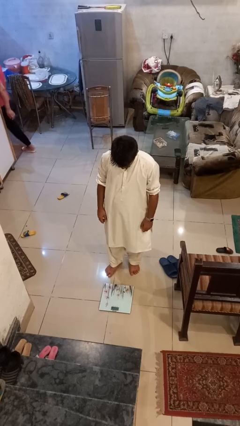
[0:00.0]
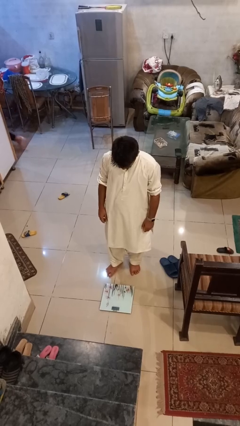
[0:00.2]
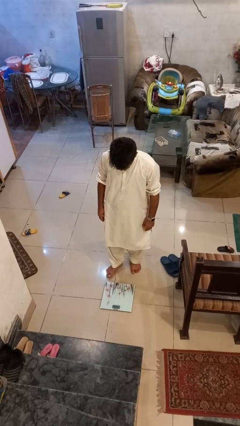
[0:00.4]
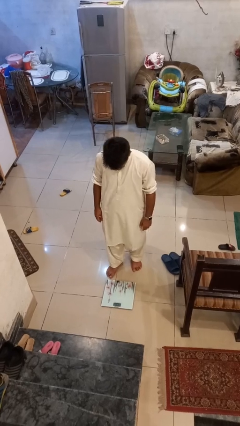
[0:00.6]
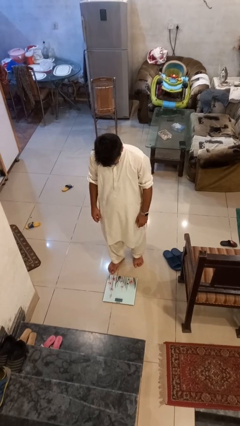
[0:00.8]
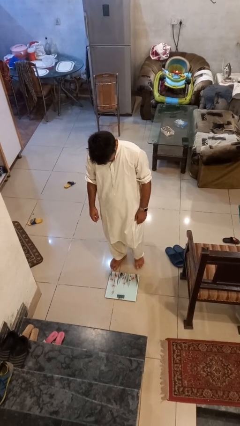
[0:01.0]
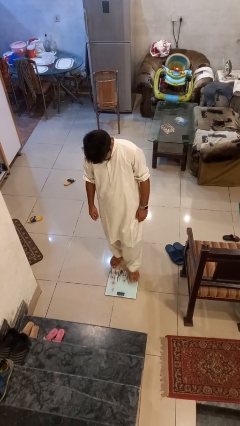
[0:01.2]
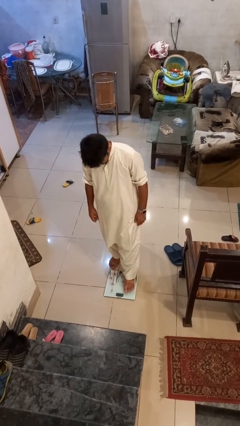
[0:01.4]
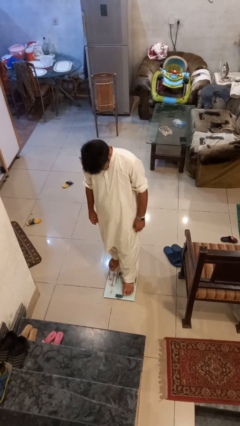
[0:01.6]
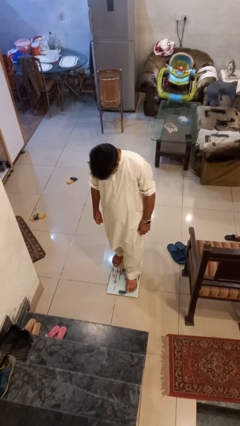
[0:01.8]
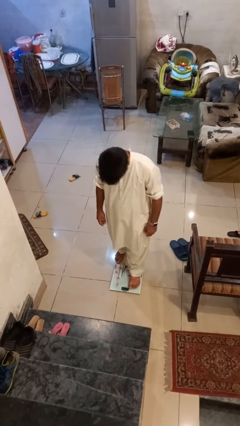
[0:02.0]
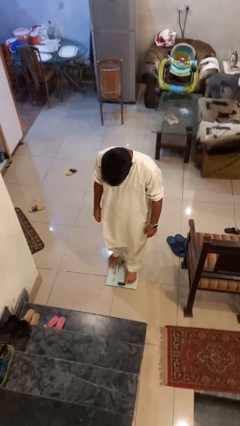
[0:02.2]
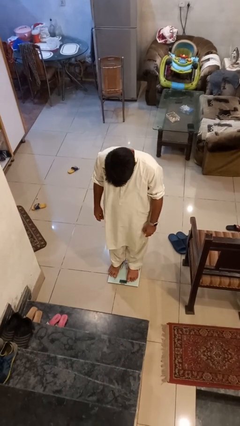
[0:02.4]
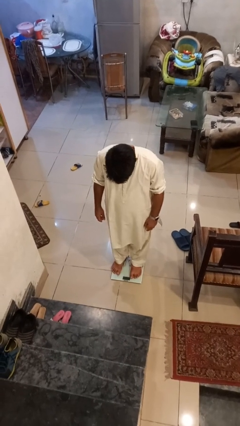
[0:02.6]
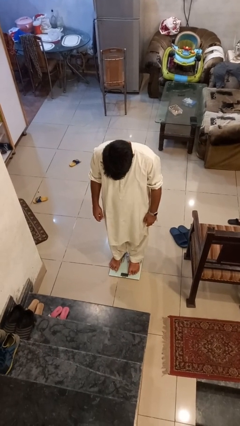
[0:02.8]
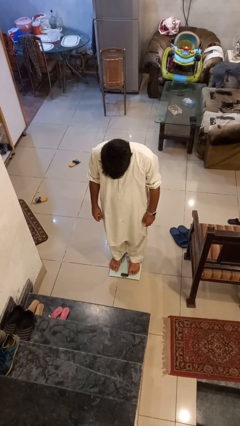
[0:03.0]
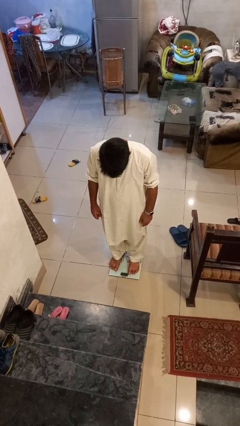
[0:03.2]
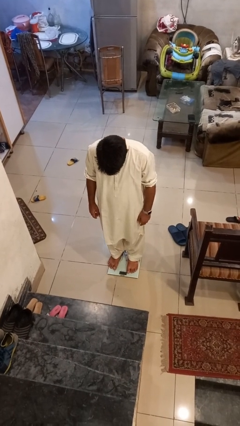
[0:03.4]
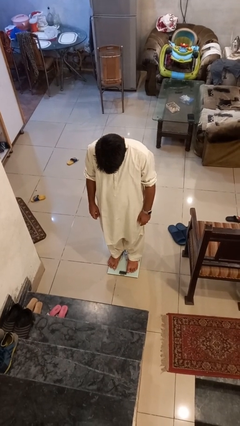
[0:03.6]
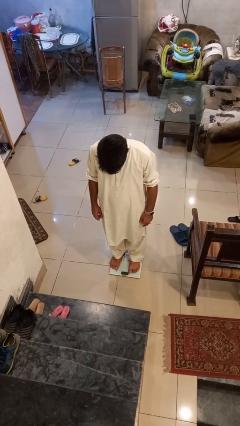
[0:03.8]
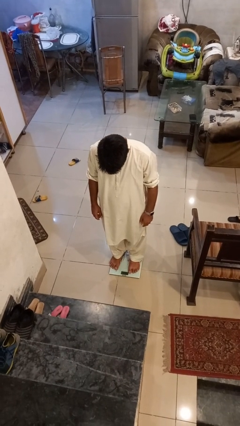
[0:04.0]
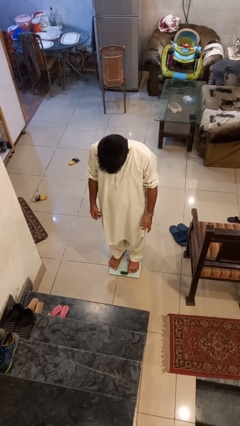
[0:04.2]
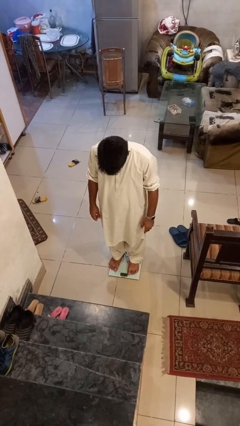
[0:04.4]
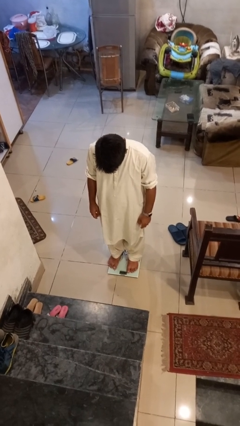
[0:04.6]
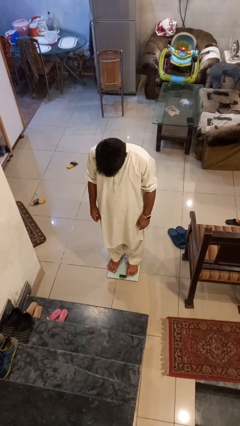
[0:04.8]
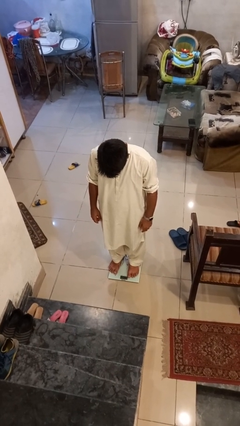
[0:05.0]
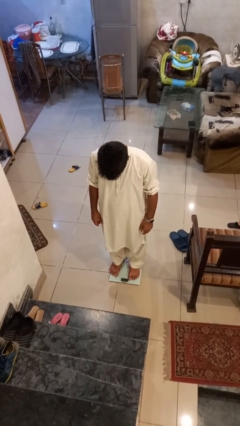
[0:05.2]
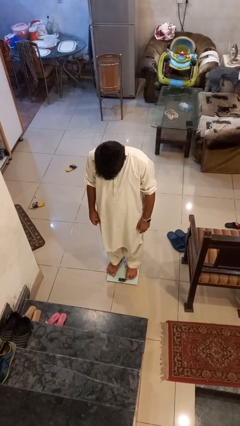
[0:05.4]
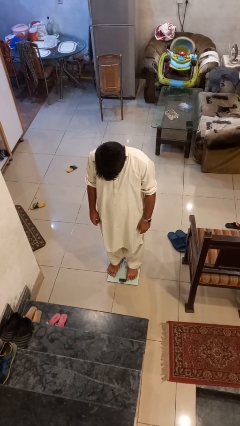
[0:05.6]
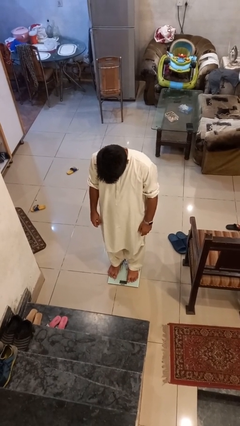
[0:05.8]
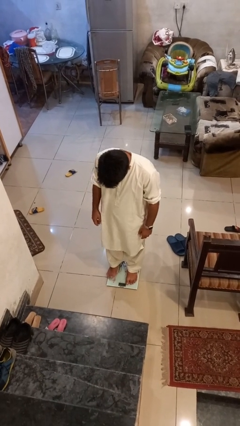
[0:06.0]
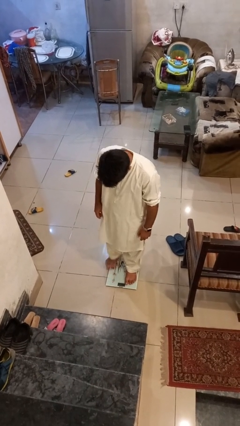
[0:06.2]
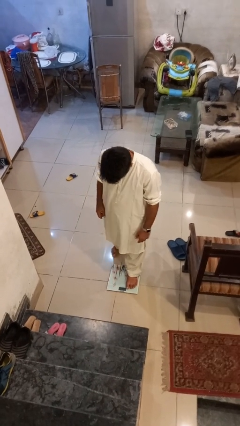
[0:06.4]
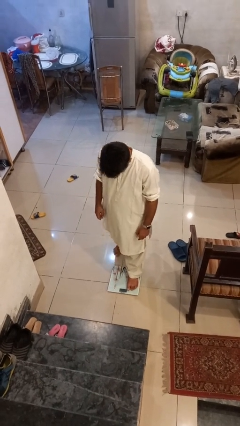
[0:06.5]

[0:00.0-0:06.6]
person uses bodyweight scale

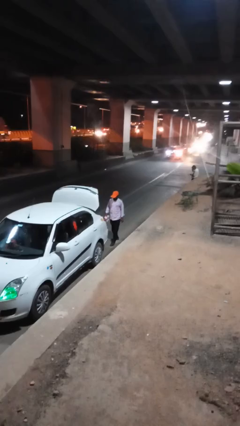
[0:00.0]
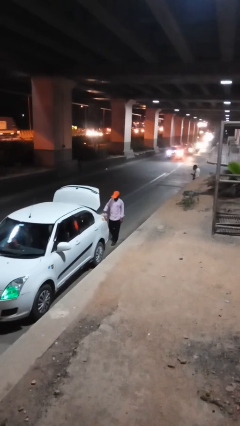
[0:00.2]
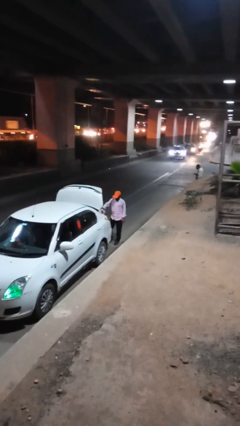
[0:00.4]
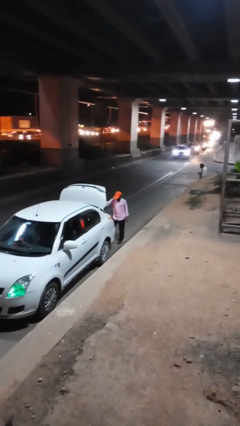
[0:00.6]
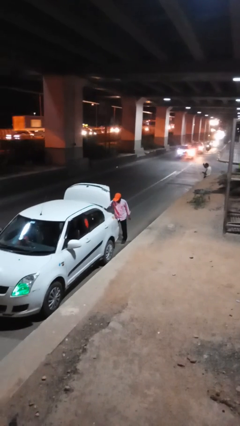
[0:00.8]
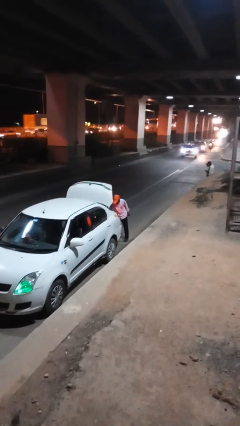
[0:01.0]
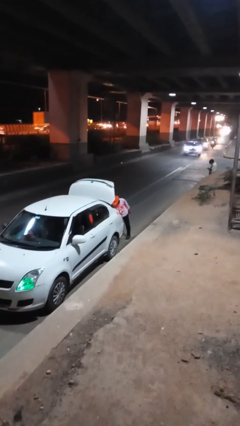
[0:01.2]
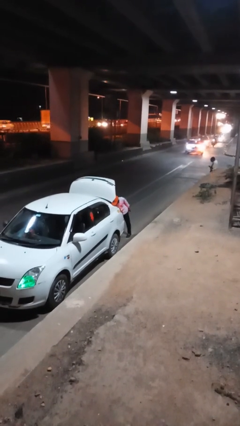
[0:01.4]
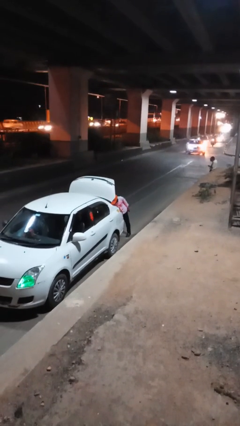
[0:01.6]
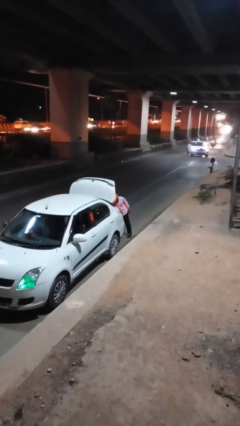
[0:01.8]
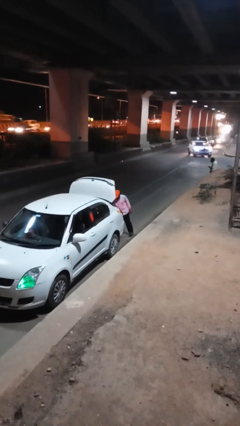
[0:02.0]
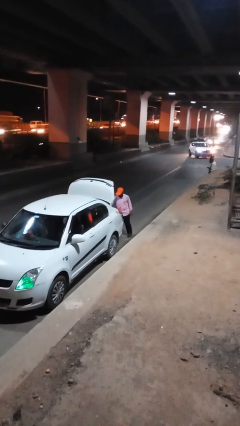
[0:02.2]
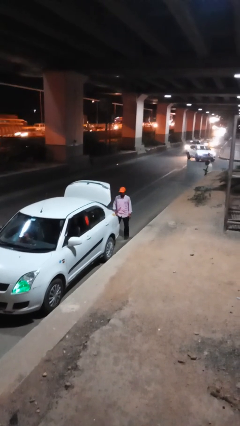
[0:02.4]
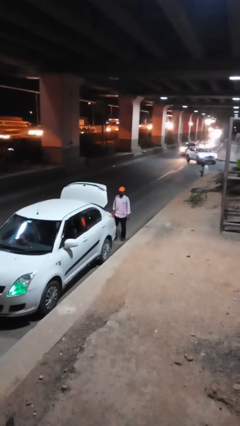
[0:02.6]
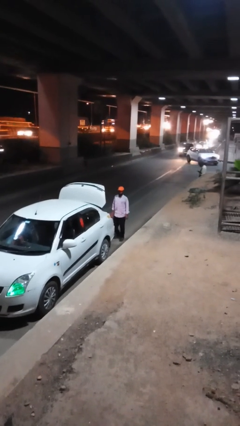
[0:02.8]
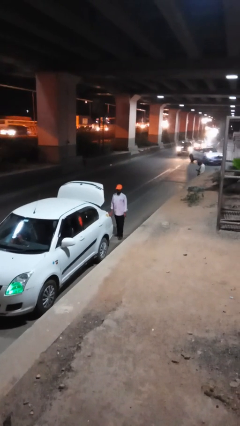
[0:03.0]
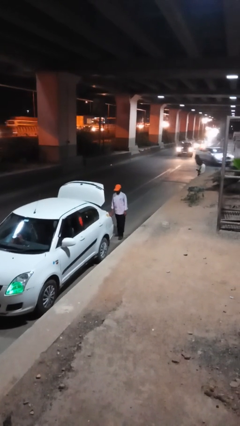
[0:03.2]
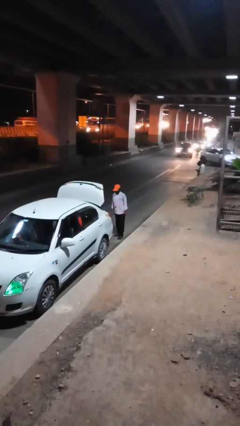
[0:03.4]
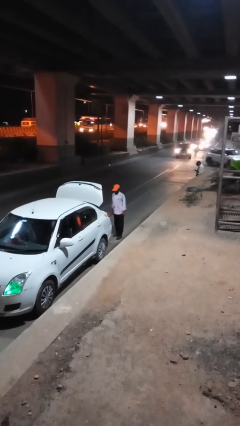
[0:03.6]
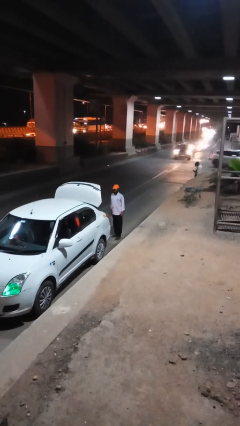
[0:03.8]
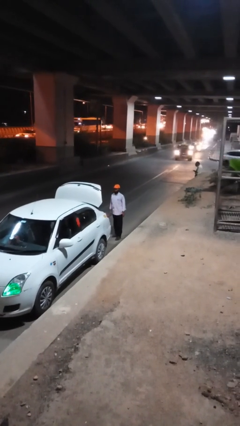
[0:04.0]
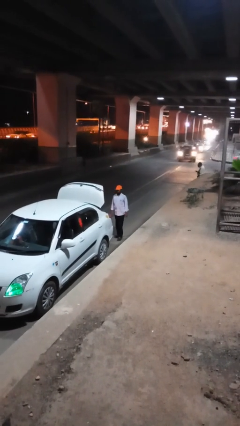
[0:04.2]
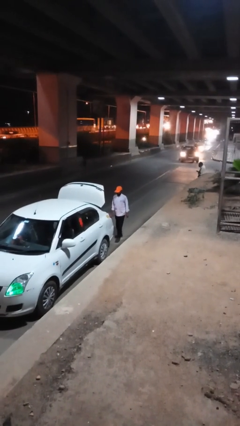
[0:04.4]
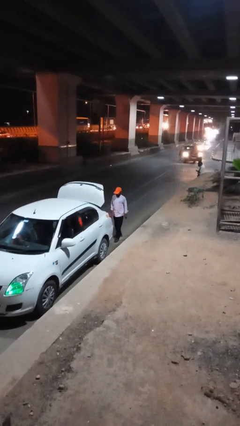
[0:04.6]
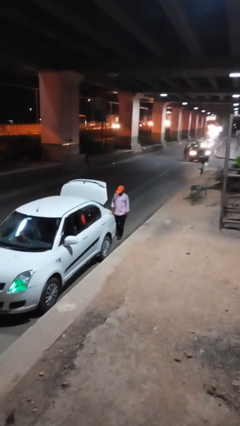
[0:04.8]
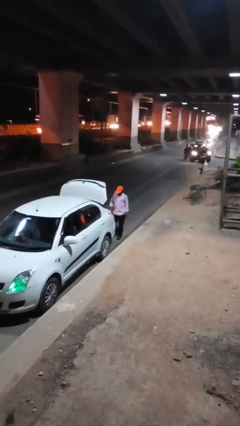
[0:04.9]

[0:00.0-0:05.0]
person loads car

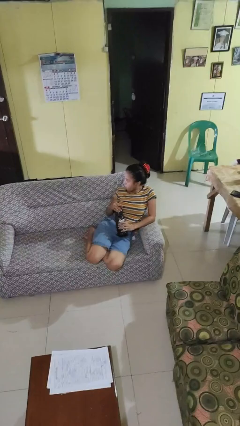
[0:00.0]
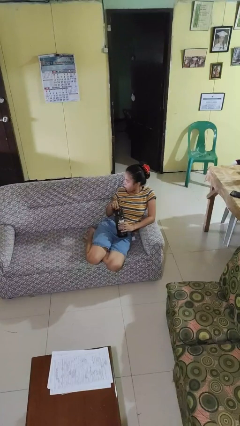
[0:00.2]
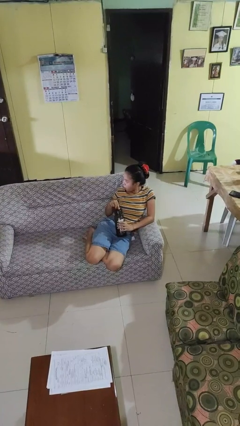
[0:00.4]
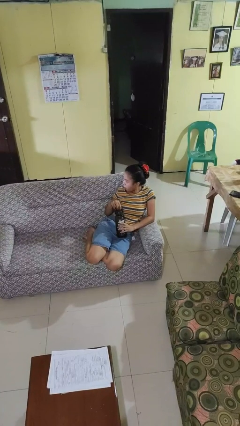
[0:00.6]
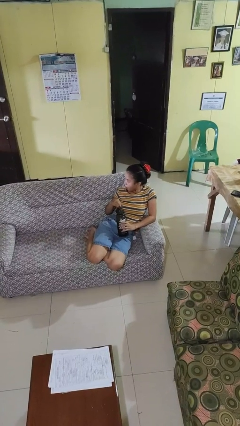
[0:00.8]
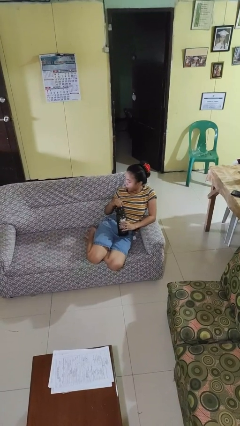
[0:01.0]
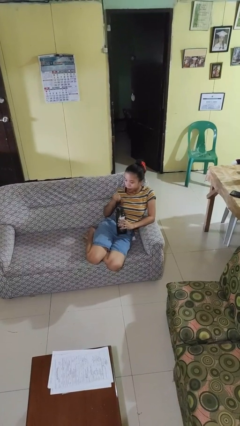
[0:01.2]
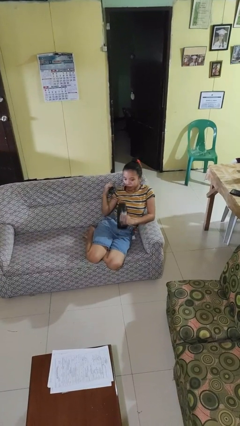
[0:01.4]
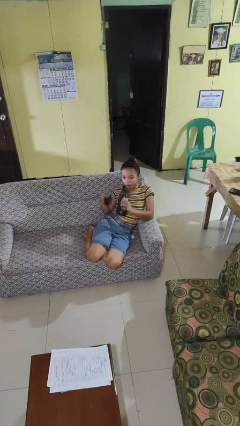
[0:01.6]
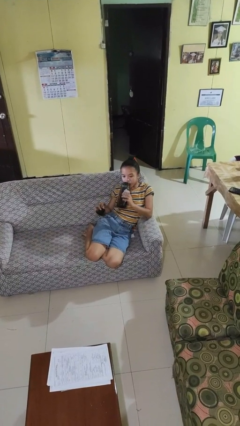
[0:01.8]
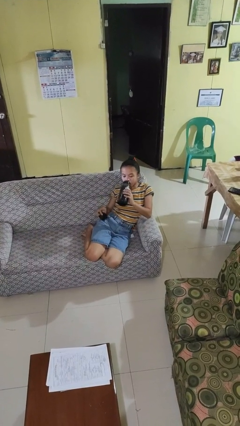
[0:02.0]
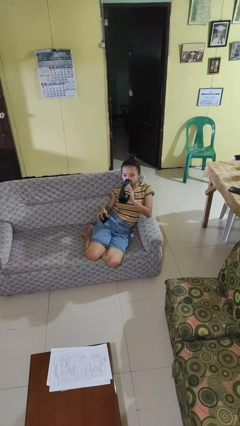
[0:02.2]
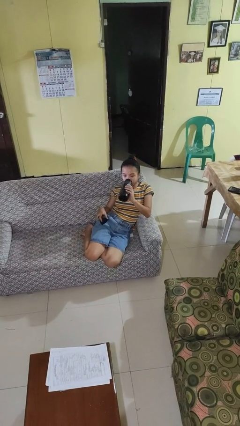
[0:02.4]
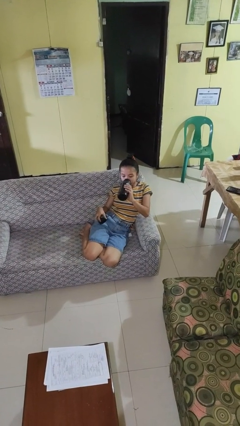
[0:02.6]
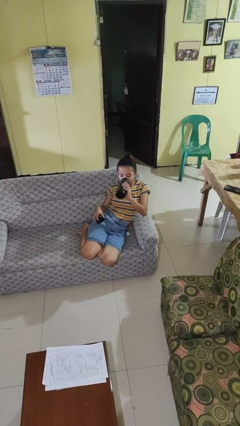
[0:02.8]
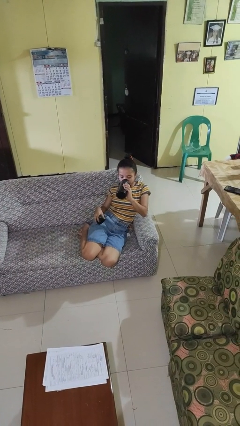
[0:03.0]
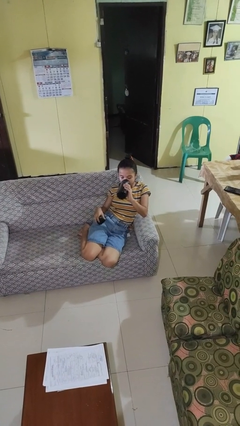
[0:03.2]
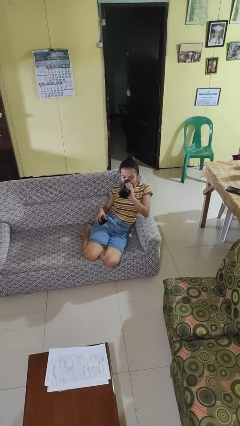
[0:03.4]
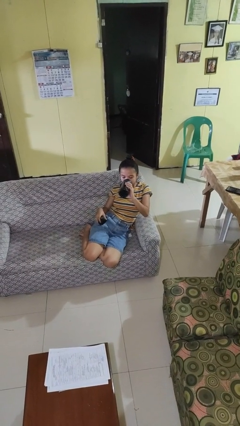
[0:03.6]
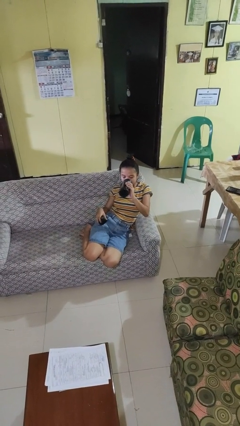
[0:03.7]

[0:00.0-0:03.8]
person drinks from bottle

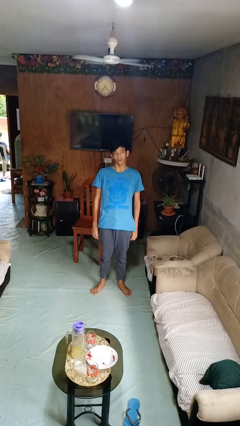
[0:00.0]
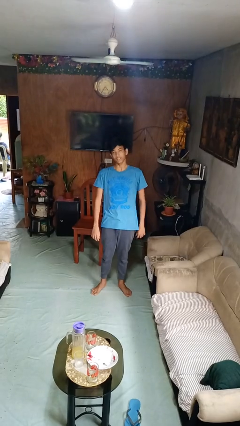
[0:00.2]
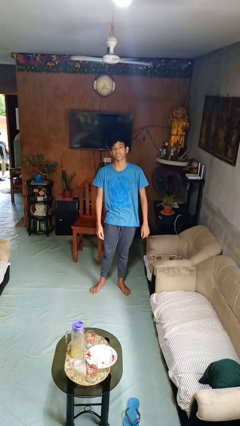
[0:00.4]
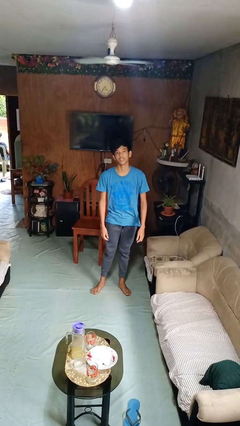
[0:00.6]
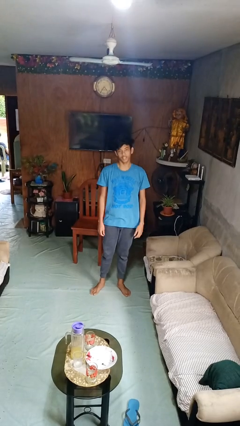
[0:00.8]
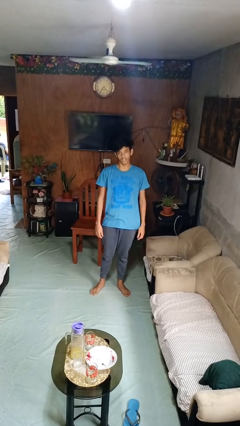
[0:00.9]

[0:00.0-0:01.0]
person dances in place

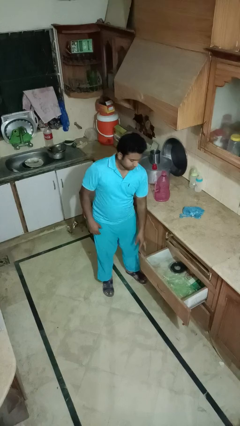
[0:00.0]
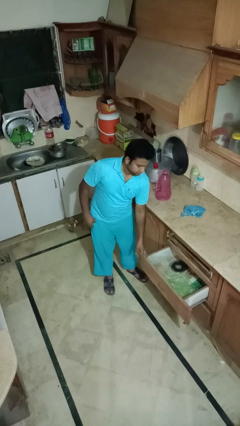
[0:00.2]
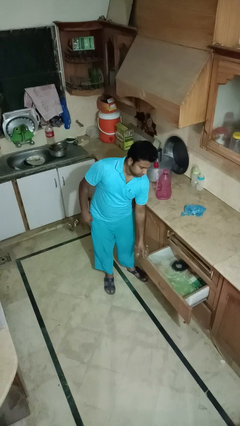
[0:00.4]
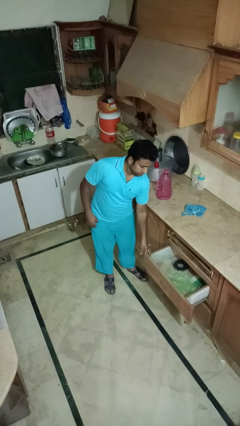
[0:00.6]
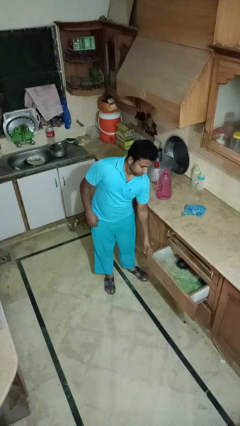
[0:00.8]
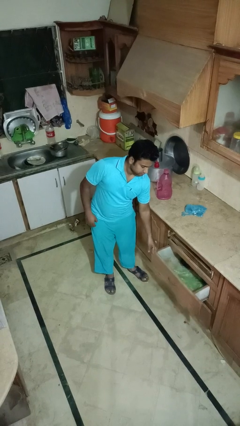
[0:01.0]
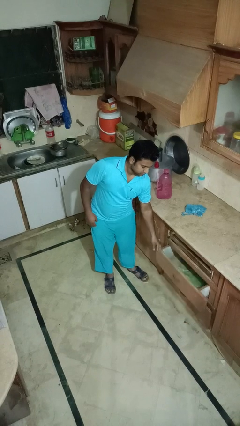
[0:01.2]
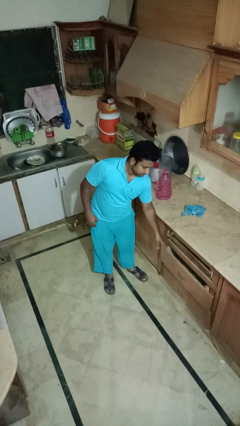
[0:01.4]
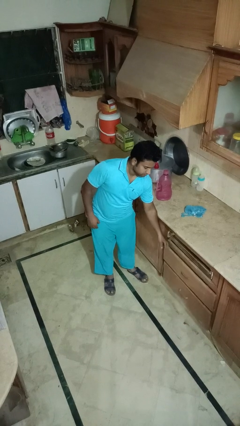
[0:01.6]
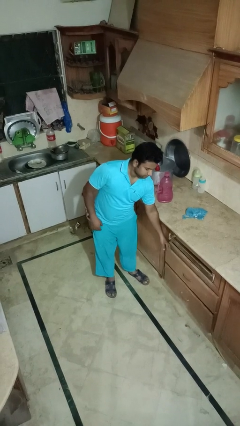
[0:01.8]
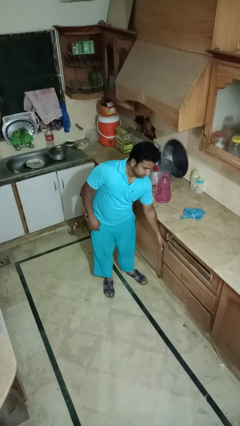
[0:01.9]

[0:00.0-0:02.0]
person closes kitchen drawer
